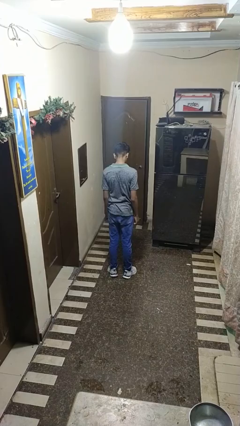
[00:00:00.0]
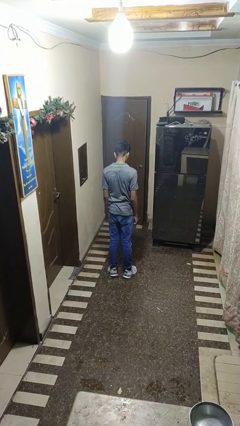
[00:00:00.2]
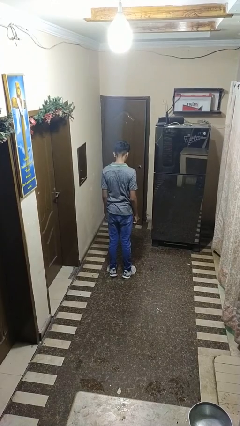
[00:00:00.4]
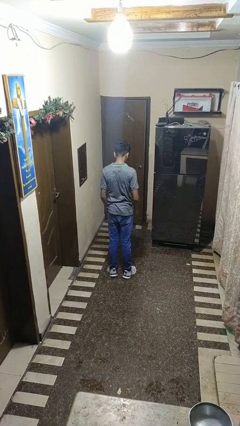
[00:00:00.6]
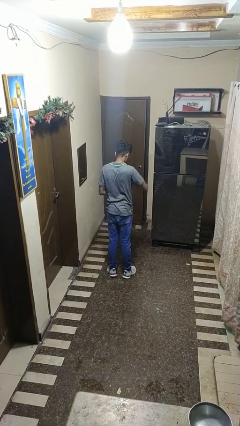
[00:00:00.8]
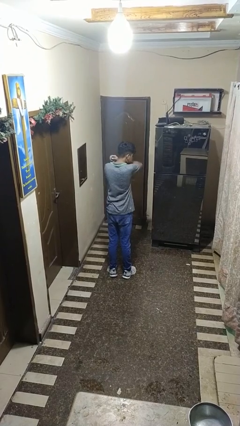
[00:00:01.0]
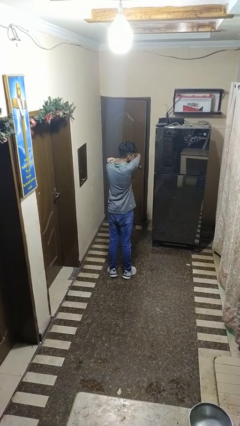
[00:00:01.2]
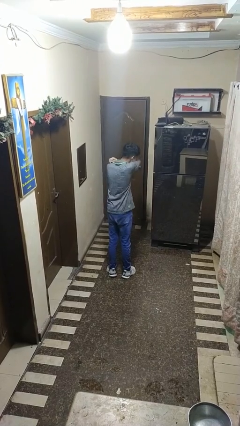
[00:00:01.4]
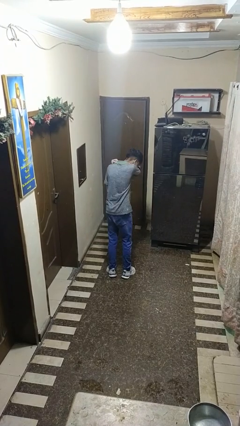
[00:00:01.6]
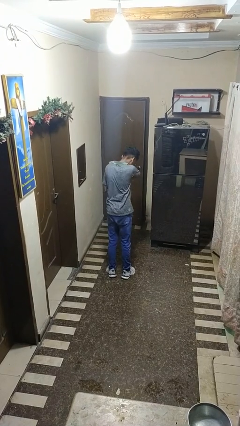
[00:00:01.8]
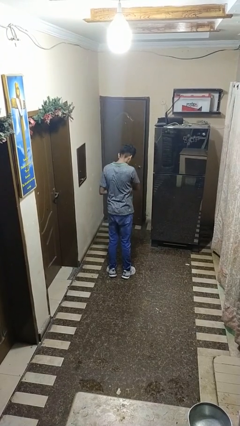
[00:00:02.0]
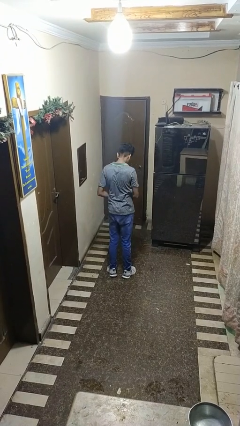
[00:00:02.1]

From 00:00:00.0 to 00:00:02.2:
person sneezes into arm

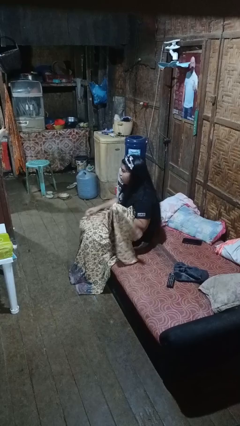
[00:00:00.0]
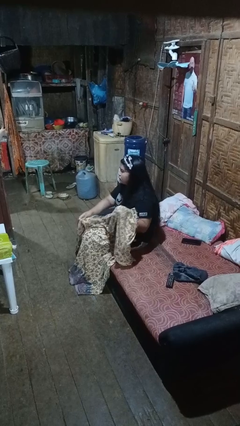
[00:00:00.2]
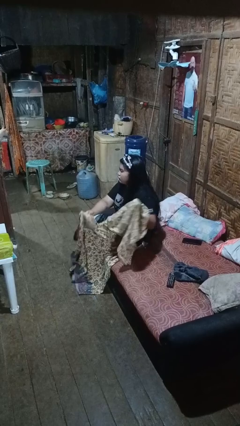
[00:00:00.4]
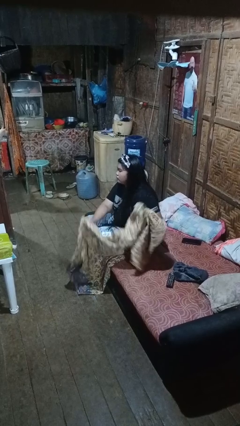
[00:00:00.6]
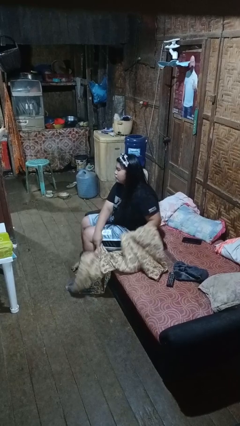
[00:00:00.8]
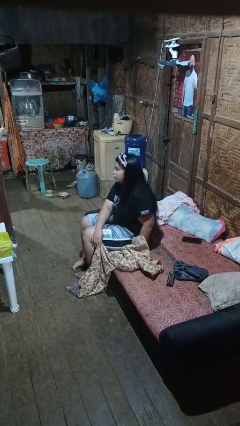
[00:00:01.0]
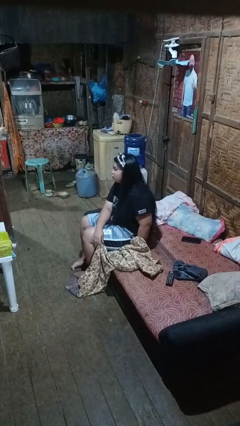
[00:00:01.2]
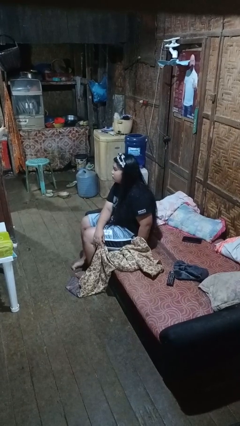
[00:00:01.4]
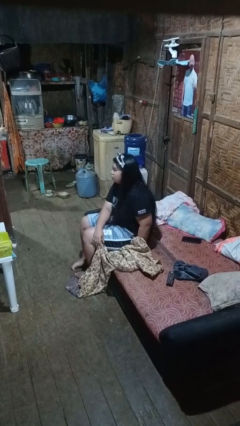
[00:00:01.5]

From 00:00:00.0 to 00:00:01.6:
person uncovers with blanket

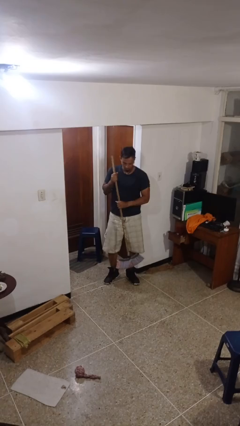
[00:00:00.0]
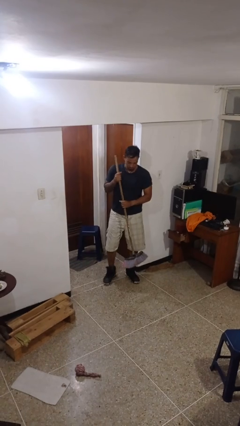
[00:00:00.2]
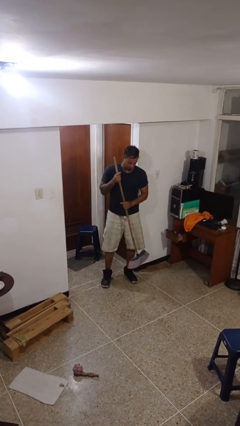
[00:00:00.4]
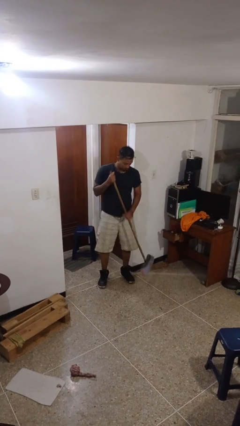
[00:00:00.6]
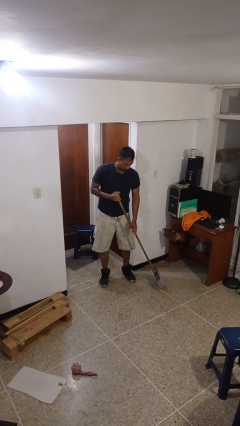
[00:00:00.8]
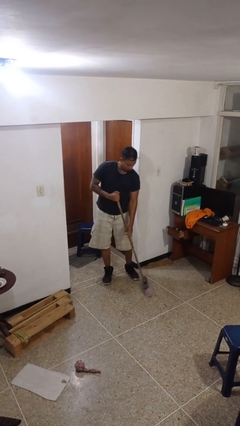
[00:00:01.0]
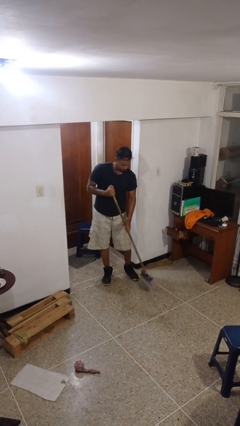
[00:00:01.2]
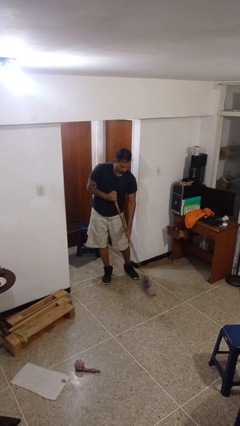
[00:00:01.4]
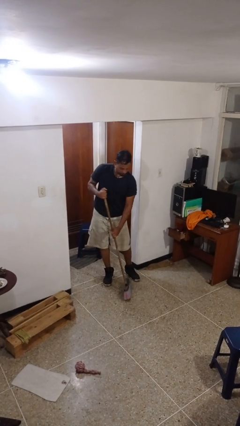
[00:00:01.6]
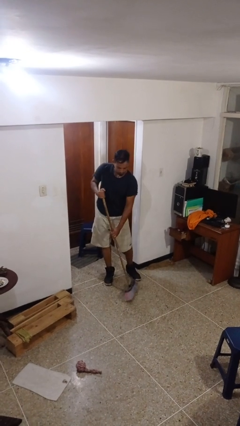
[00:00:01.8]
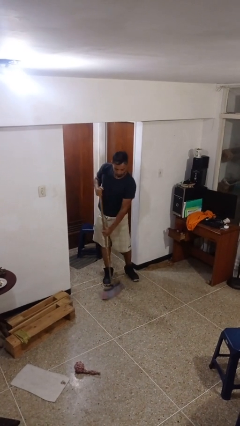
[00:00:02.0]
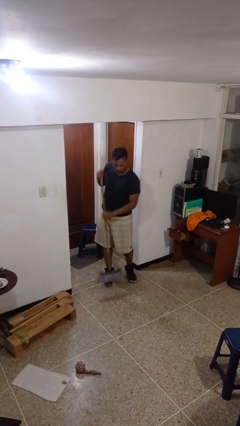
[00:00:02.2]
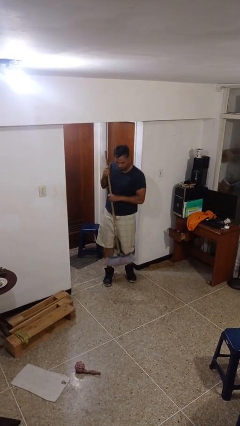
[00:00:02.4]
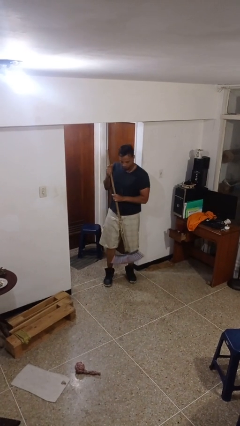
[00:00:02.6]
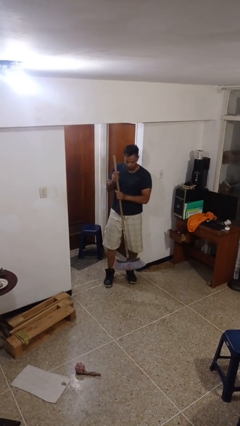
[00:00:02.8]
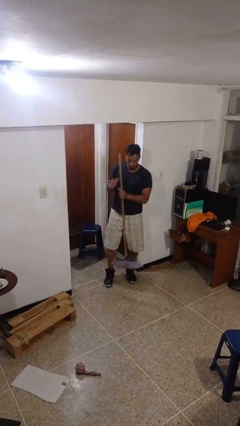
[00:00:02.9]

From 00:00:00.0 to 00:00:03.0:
person sweeps floor

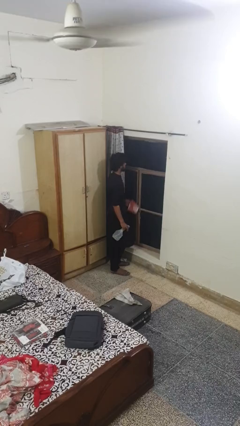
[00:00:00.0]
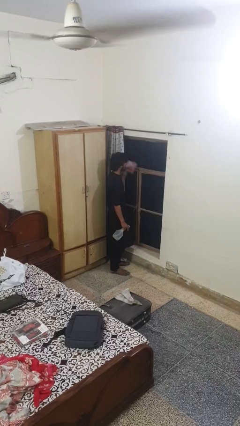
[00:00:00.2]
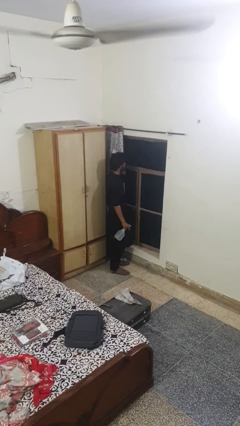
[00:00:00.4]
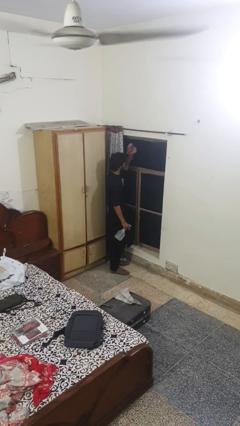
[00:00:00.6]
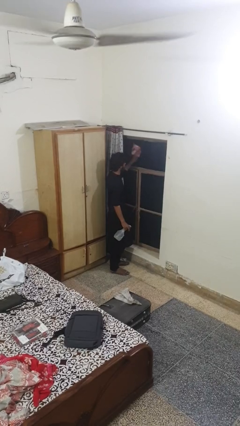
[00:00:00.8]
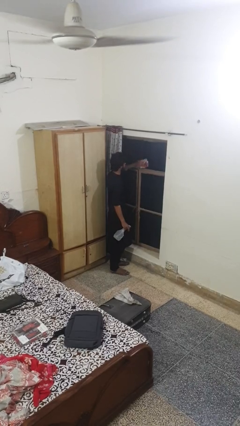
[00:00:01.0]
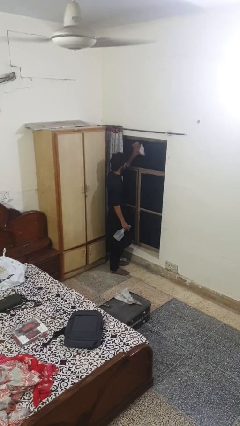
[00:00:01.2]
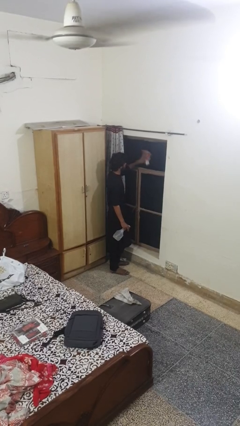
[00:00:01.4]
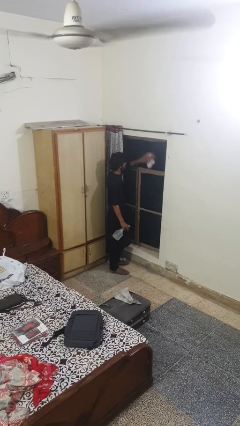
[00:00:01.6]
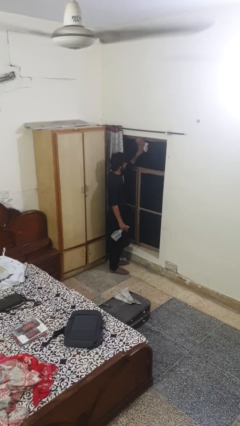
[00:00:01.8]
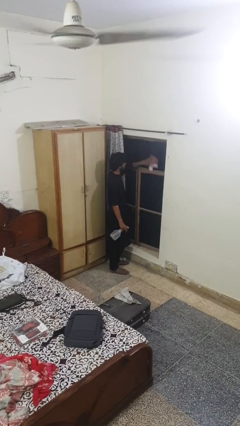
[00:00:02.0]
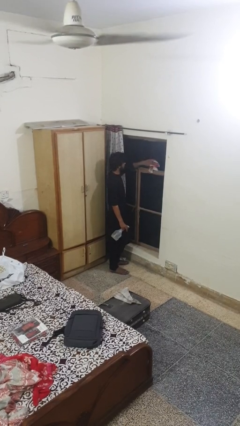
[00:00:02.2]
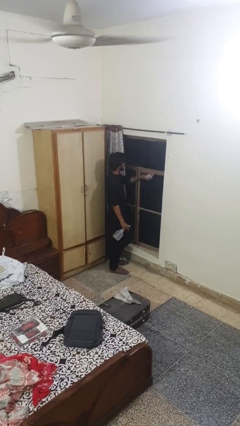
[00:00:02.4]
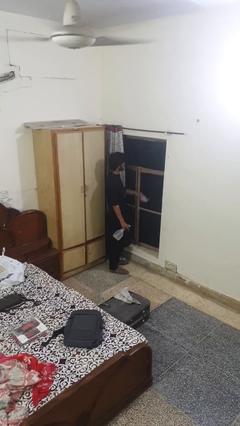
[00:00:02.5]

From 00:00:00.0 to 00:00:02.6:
person washes window

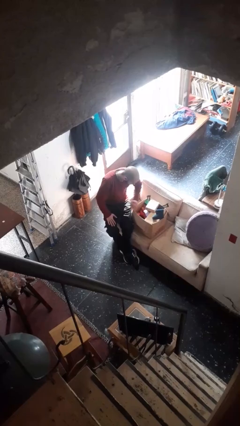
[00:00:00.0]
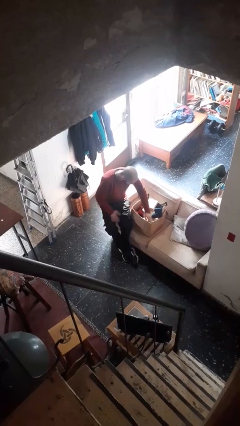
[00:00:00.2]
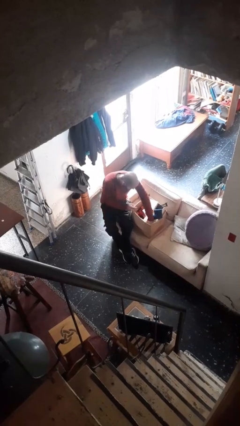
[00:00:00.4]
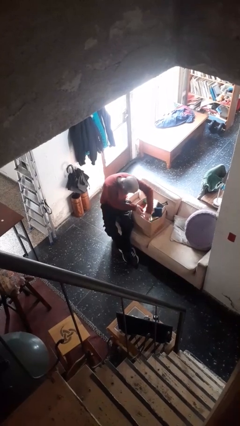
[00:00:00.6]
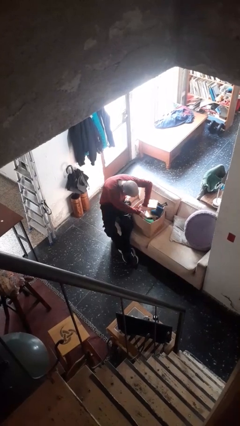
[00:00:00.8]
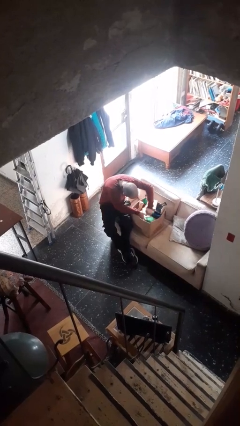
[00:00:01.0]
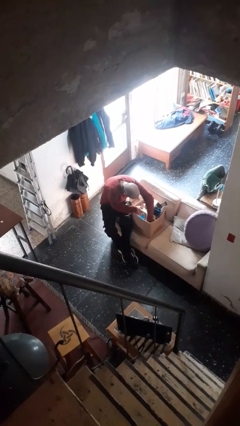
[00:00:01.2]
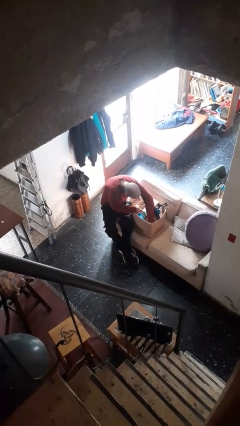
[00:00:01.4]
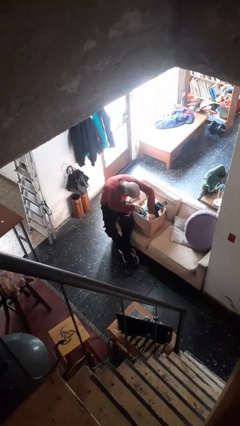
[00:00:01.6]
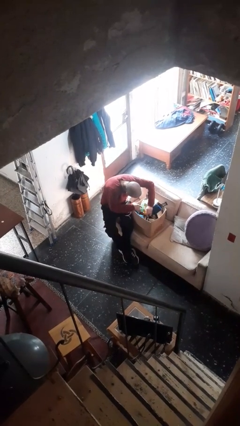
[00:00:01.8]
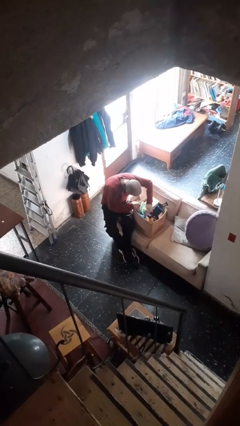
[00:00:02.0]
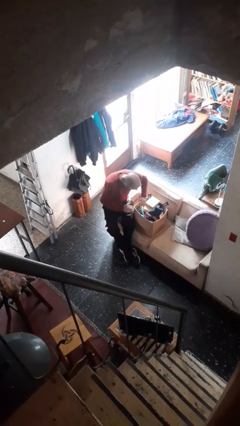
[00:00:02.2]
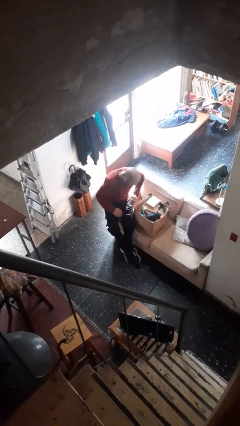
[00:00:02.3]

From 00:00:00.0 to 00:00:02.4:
person searches in box

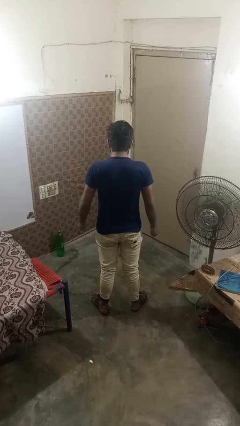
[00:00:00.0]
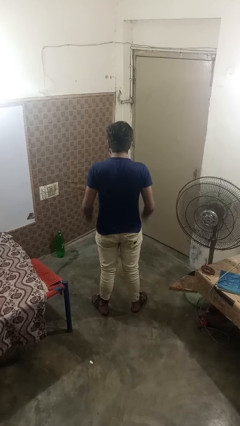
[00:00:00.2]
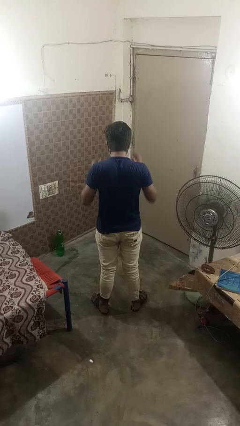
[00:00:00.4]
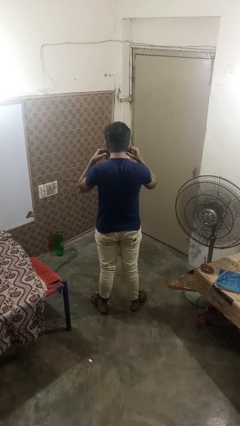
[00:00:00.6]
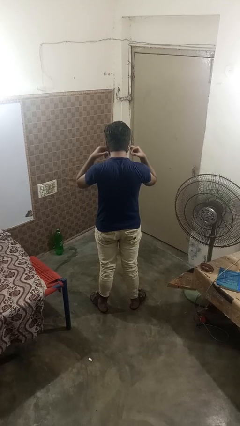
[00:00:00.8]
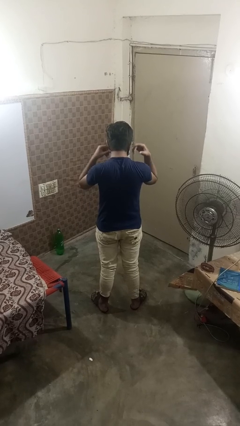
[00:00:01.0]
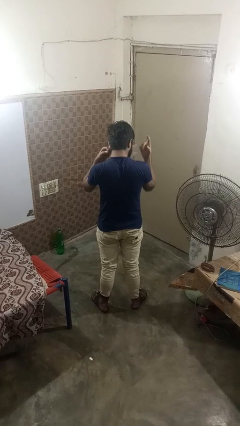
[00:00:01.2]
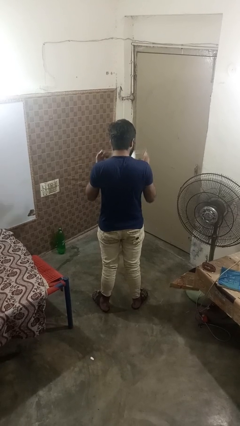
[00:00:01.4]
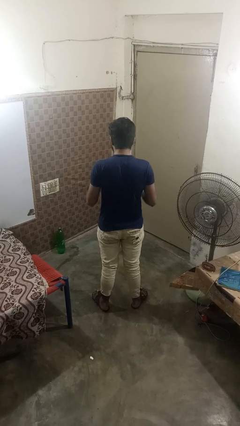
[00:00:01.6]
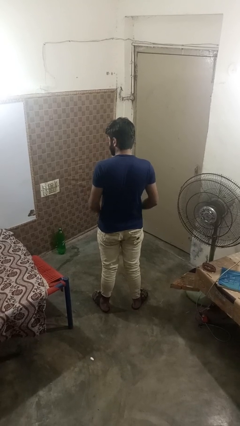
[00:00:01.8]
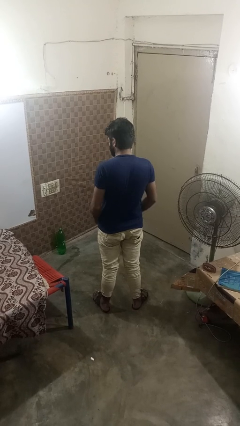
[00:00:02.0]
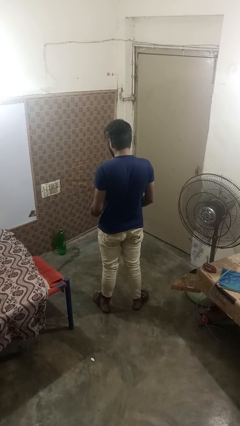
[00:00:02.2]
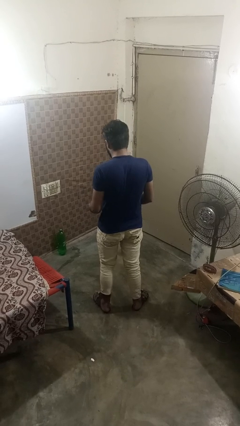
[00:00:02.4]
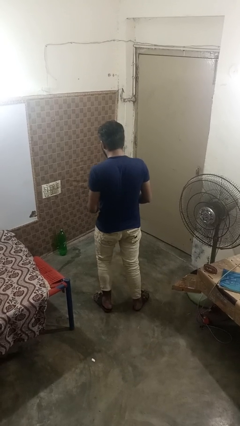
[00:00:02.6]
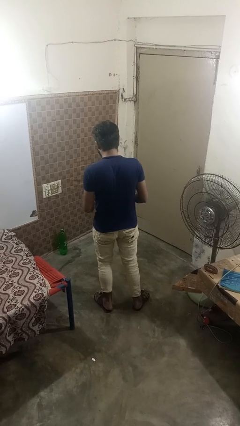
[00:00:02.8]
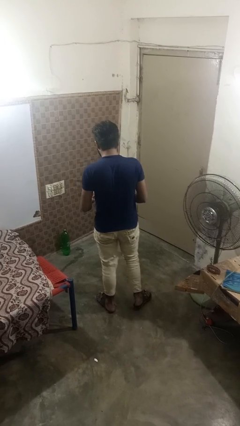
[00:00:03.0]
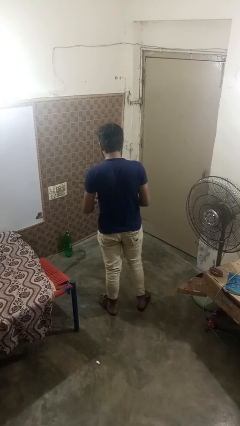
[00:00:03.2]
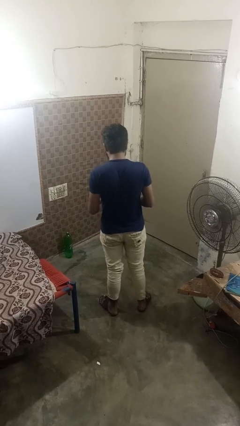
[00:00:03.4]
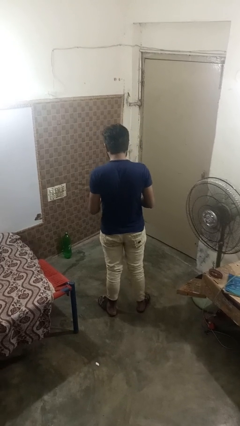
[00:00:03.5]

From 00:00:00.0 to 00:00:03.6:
person takes off facemask

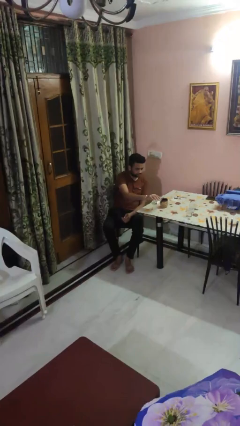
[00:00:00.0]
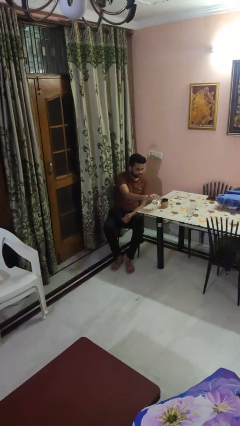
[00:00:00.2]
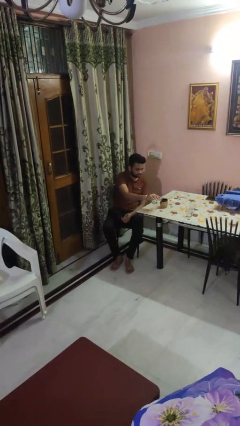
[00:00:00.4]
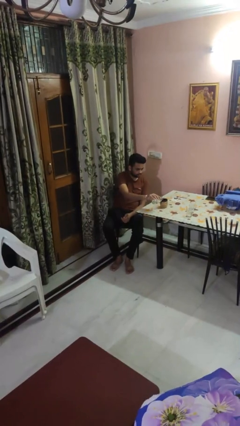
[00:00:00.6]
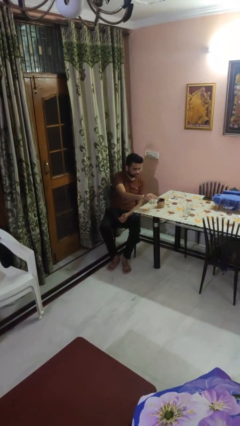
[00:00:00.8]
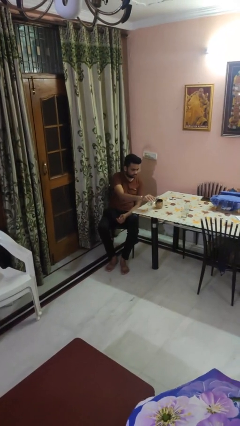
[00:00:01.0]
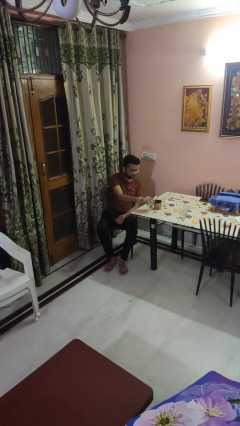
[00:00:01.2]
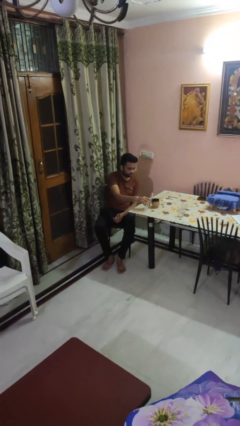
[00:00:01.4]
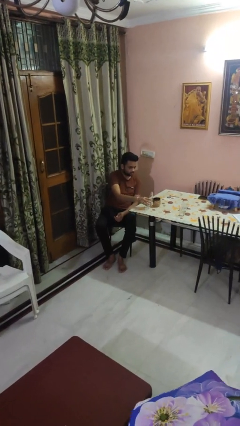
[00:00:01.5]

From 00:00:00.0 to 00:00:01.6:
person pours liquid into cup
